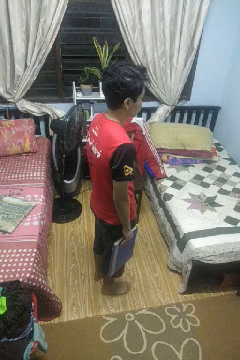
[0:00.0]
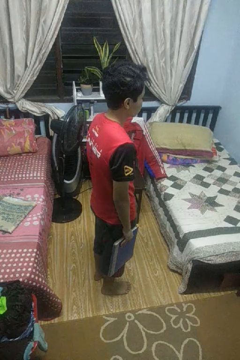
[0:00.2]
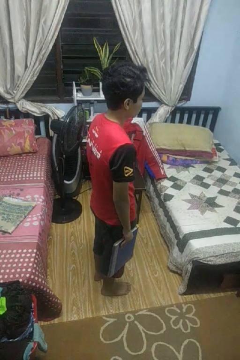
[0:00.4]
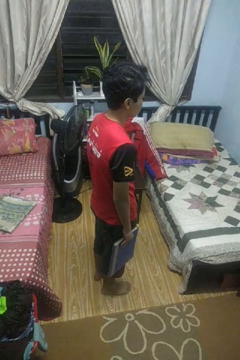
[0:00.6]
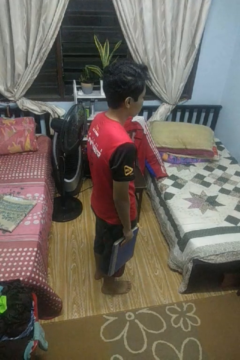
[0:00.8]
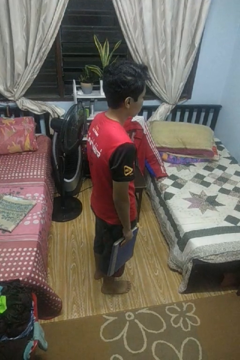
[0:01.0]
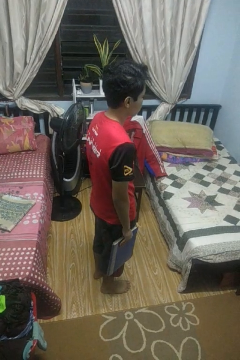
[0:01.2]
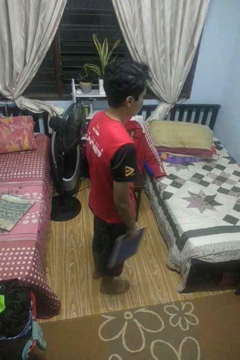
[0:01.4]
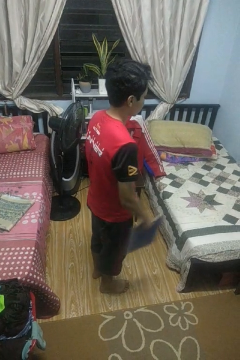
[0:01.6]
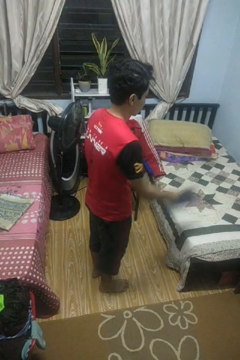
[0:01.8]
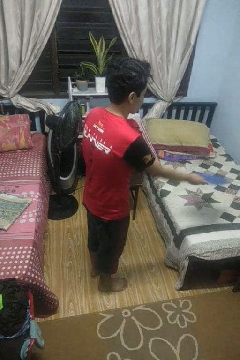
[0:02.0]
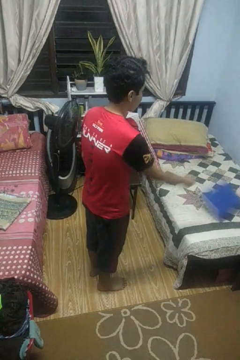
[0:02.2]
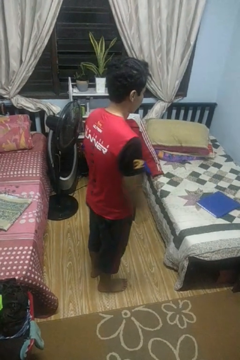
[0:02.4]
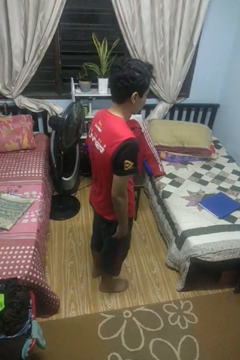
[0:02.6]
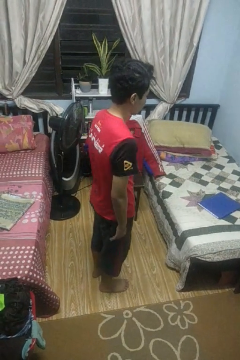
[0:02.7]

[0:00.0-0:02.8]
person throws object on bed

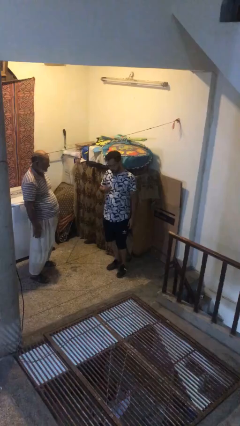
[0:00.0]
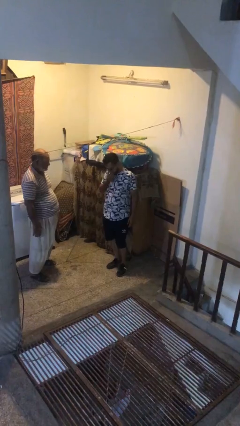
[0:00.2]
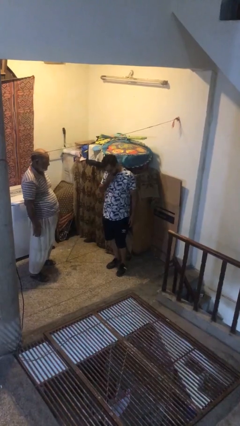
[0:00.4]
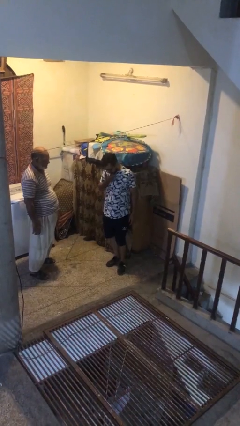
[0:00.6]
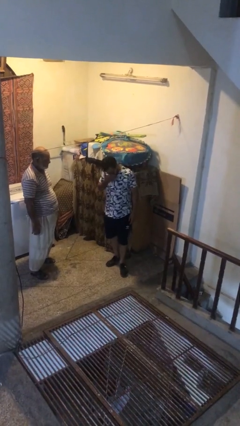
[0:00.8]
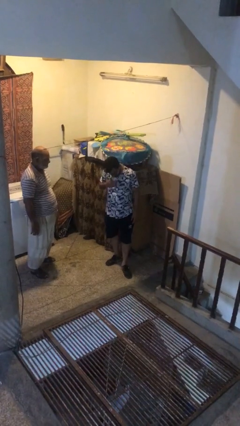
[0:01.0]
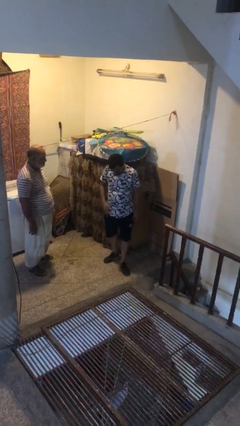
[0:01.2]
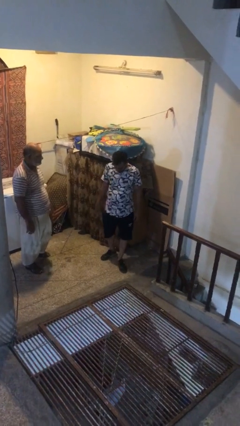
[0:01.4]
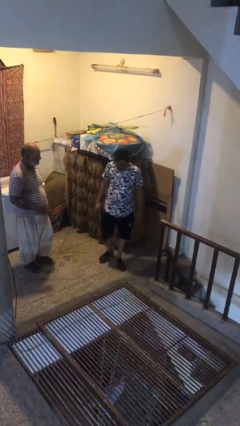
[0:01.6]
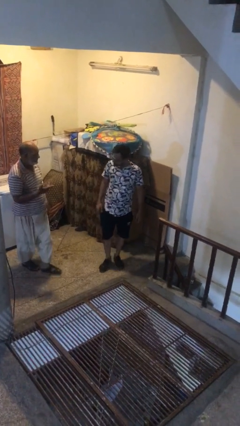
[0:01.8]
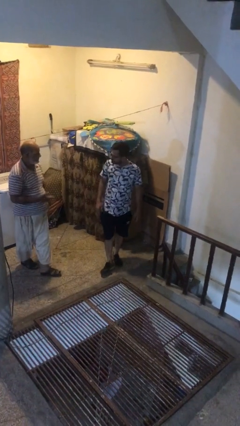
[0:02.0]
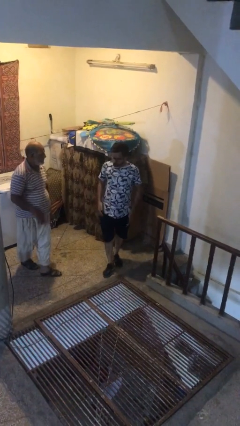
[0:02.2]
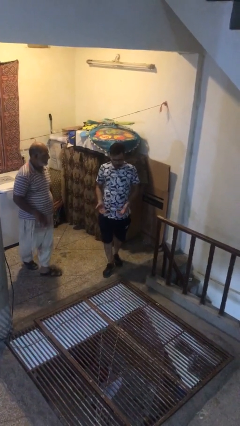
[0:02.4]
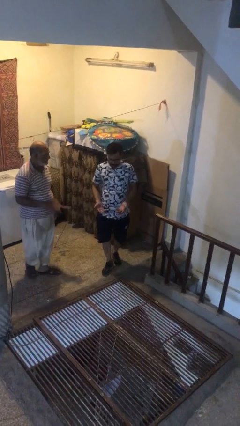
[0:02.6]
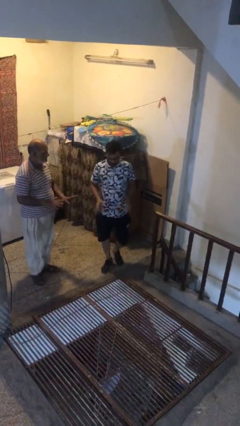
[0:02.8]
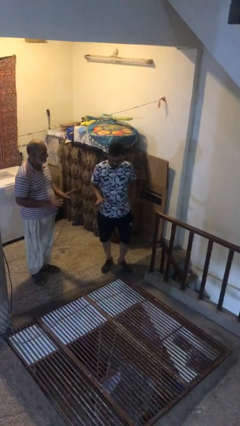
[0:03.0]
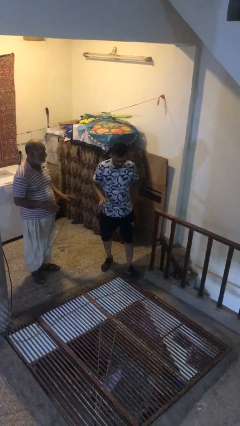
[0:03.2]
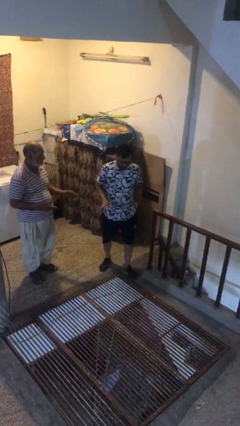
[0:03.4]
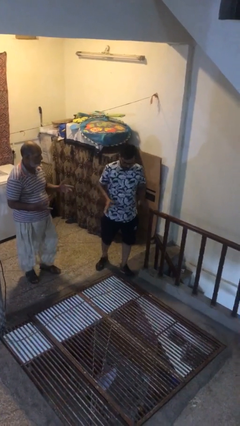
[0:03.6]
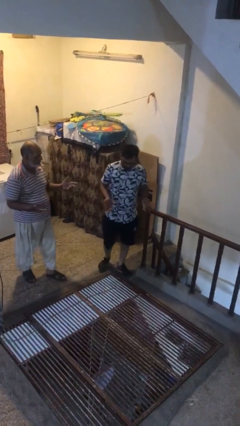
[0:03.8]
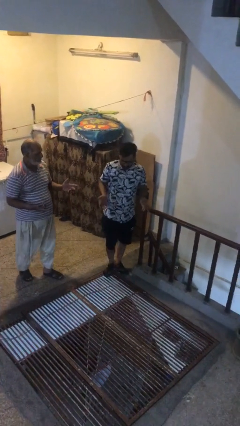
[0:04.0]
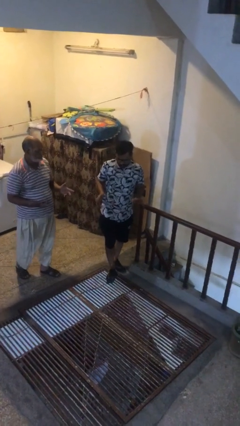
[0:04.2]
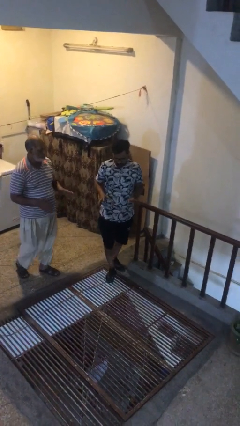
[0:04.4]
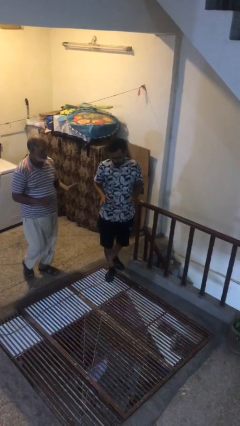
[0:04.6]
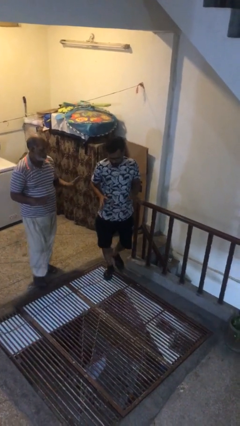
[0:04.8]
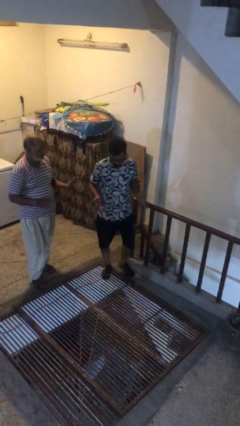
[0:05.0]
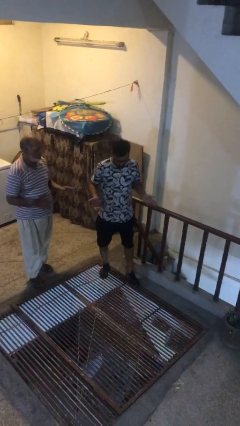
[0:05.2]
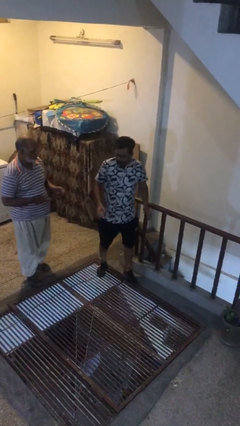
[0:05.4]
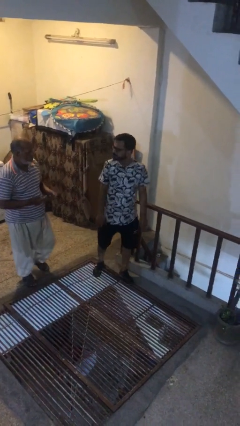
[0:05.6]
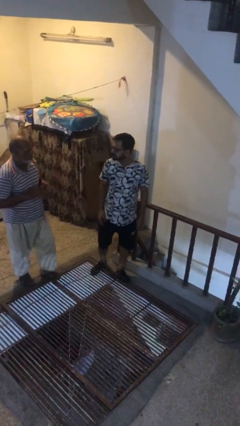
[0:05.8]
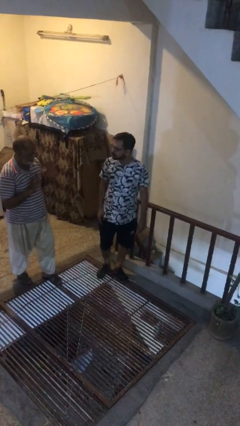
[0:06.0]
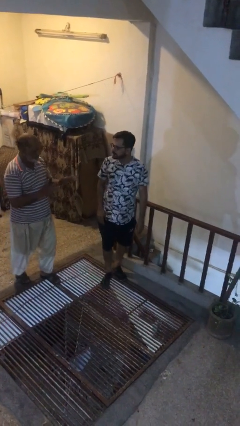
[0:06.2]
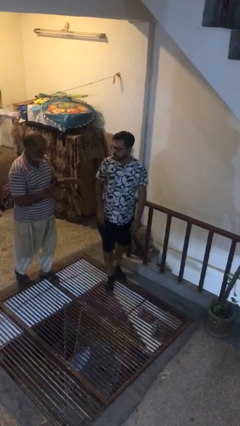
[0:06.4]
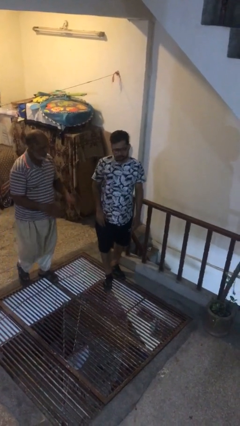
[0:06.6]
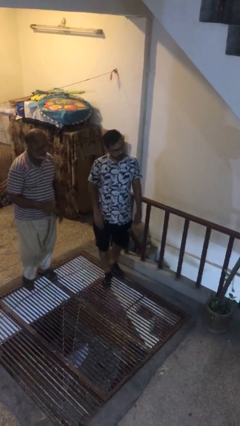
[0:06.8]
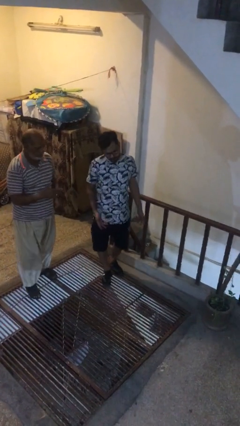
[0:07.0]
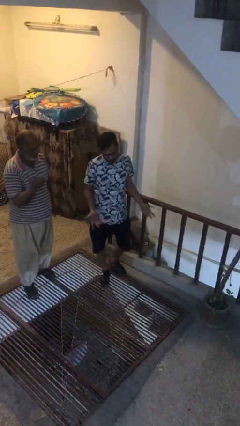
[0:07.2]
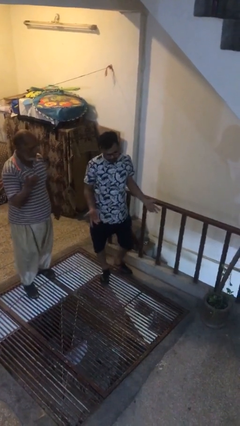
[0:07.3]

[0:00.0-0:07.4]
person talks to person

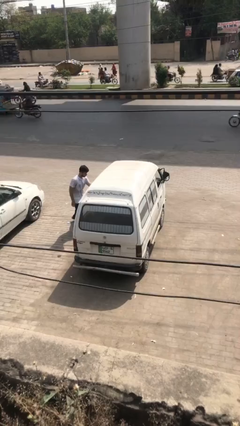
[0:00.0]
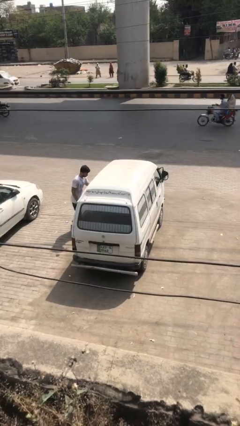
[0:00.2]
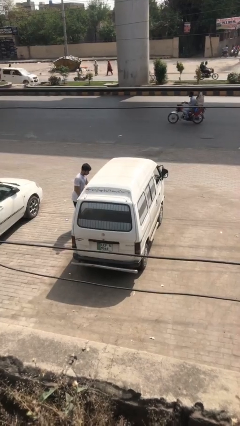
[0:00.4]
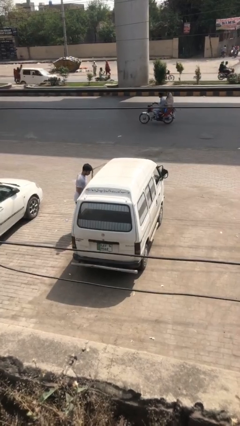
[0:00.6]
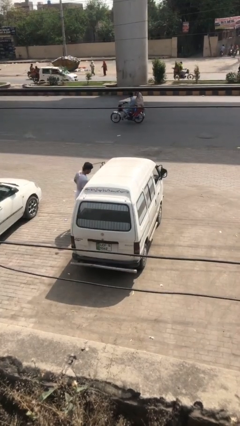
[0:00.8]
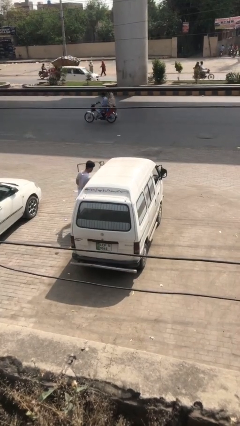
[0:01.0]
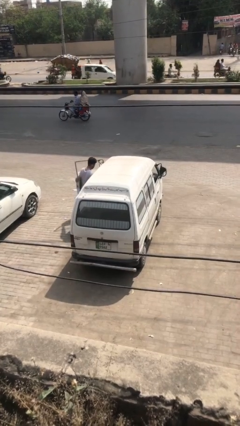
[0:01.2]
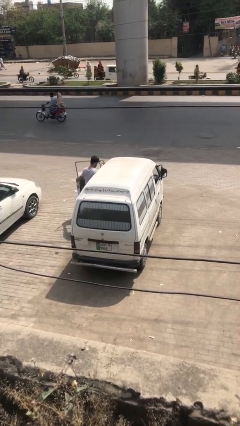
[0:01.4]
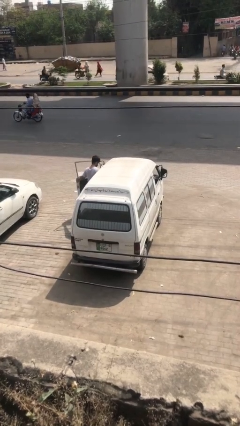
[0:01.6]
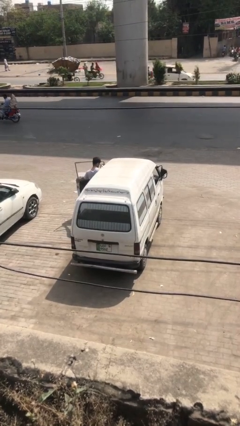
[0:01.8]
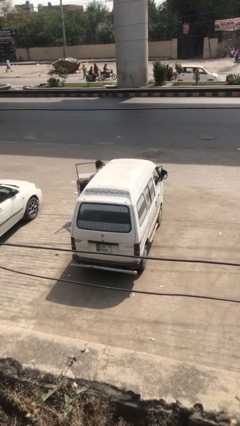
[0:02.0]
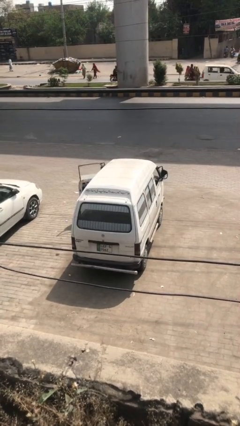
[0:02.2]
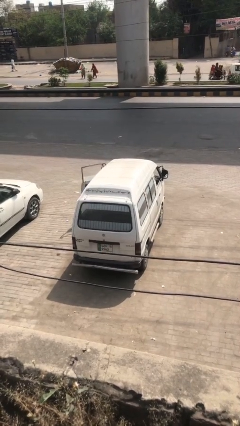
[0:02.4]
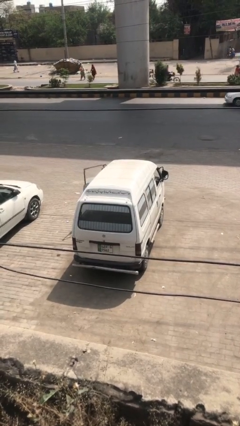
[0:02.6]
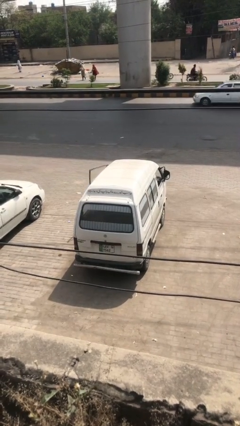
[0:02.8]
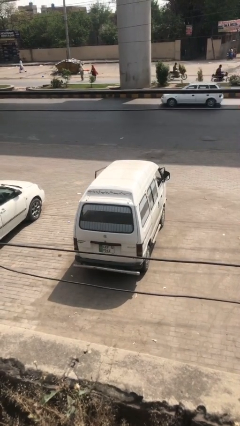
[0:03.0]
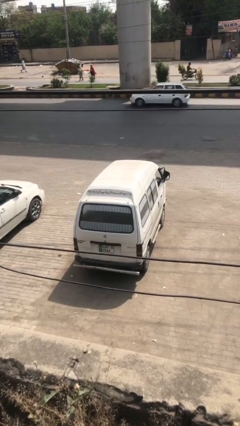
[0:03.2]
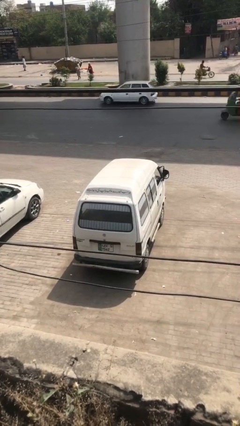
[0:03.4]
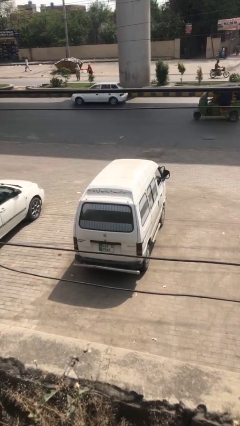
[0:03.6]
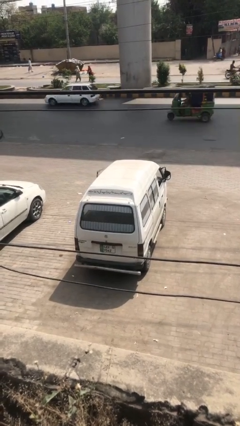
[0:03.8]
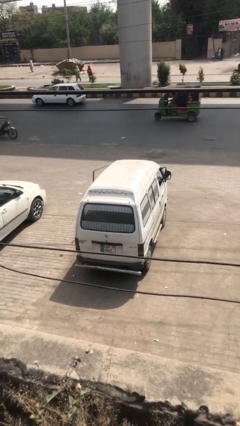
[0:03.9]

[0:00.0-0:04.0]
car picks up person

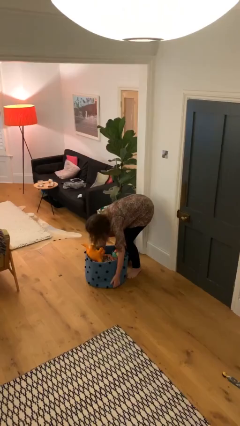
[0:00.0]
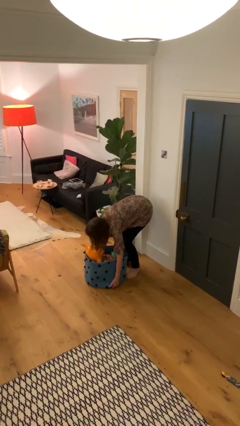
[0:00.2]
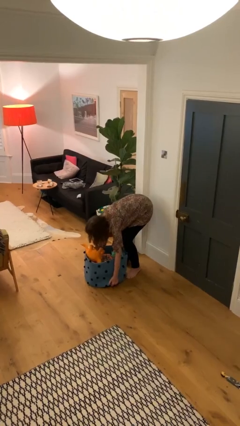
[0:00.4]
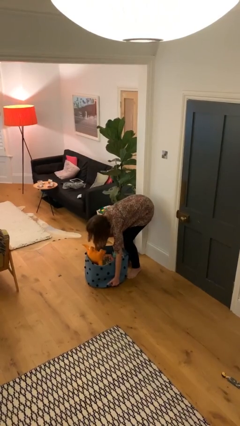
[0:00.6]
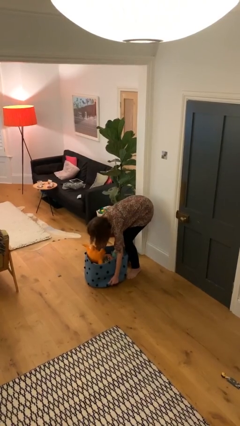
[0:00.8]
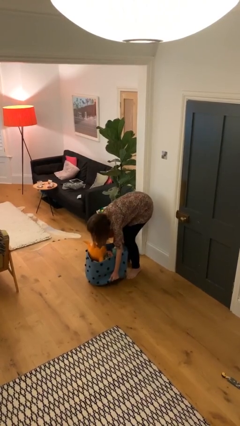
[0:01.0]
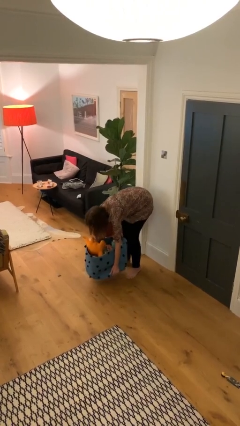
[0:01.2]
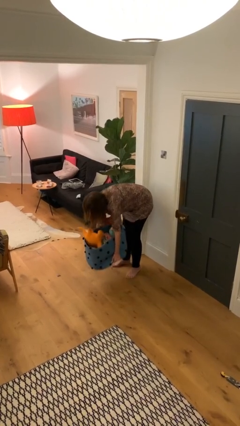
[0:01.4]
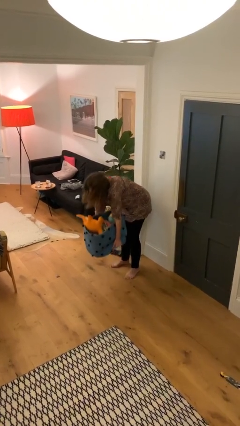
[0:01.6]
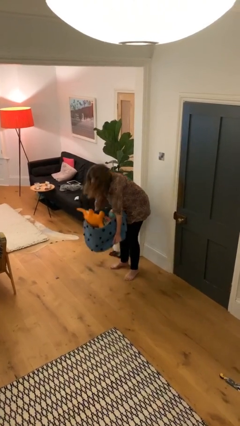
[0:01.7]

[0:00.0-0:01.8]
person picks up object from floor

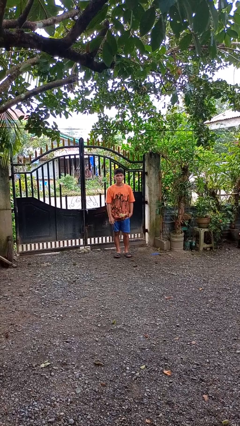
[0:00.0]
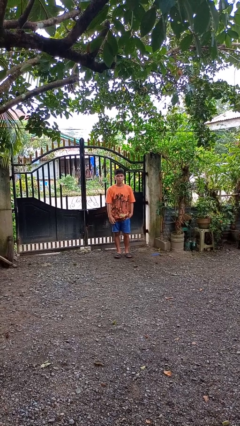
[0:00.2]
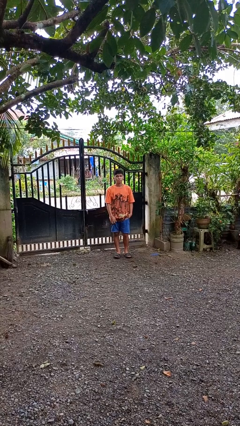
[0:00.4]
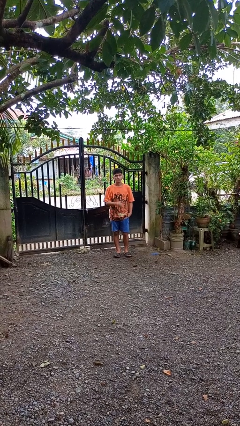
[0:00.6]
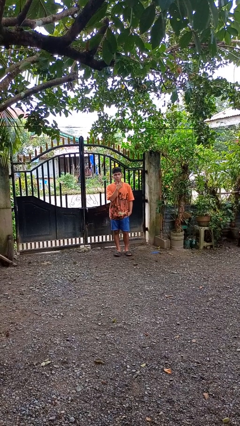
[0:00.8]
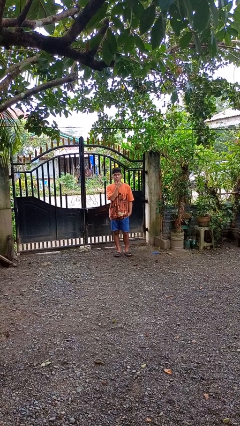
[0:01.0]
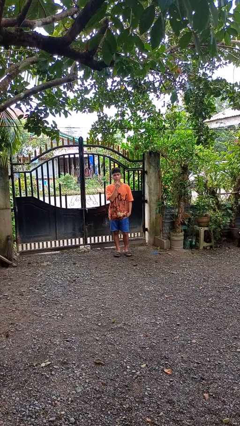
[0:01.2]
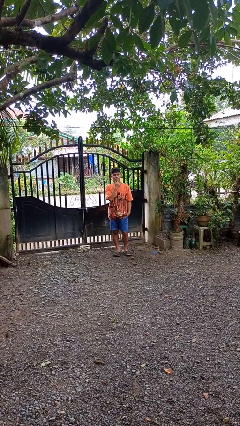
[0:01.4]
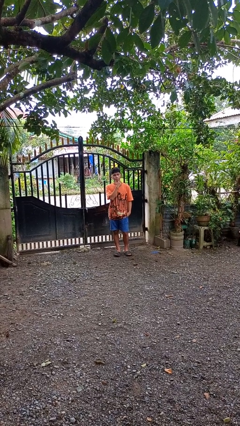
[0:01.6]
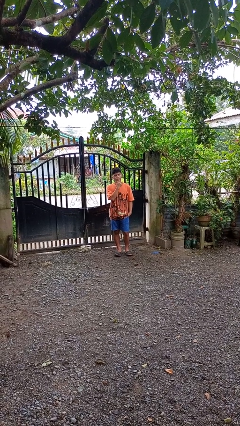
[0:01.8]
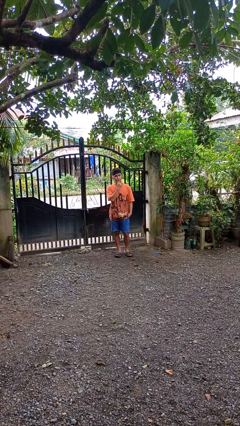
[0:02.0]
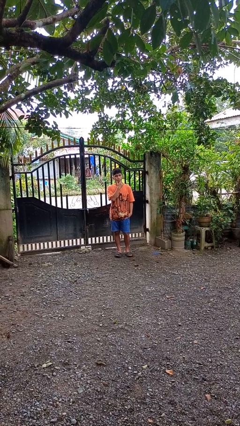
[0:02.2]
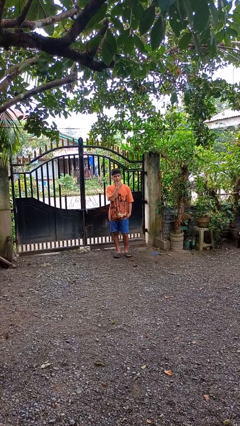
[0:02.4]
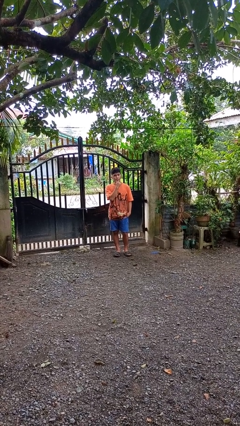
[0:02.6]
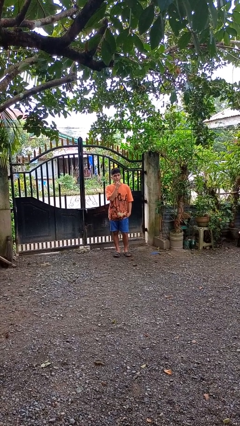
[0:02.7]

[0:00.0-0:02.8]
person strokes chin
